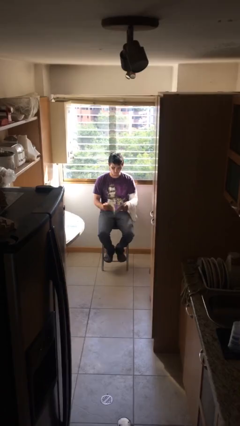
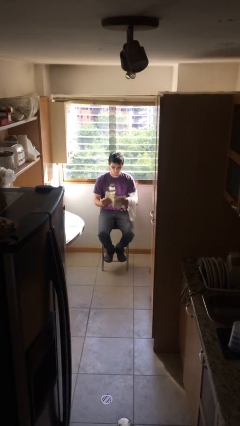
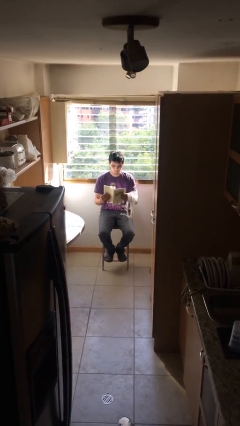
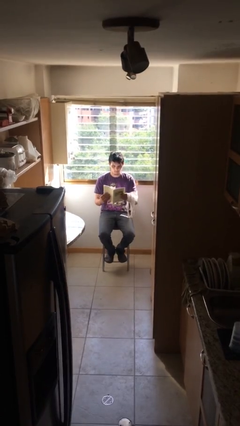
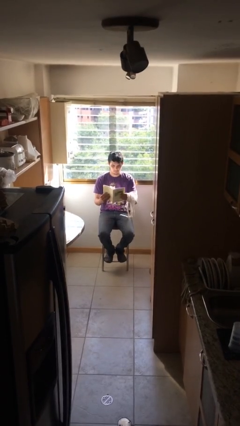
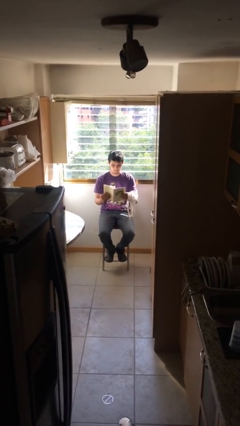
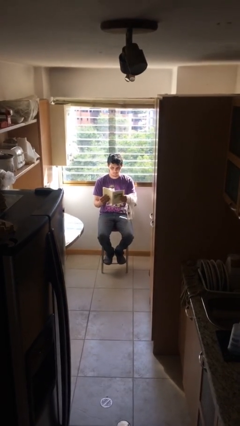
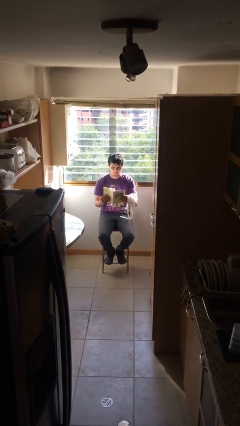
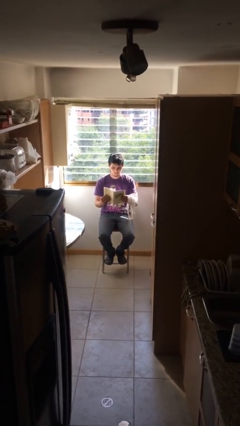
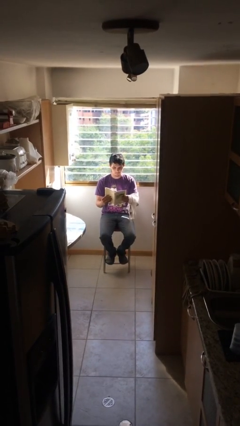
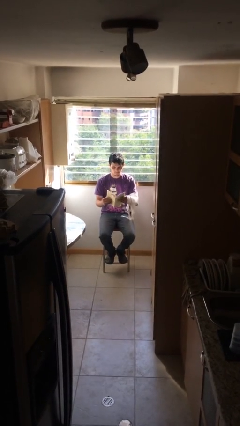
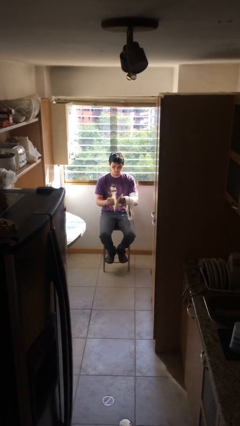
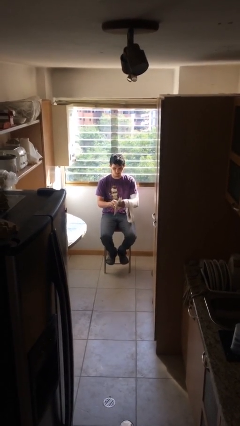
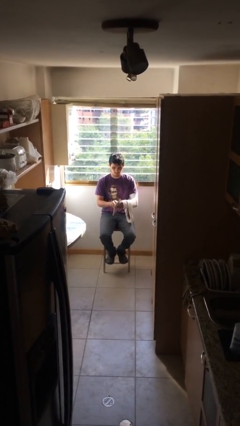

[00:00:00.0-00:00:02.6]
person reads document

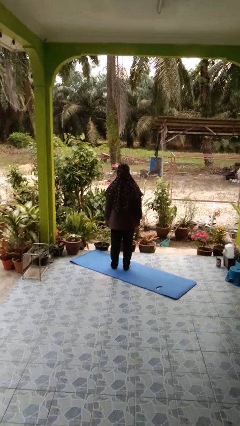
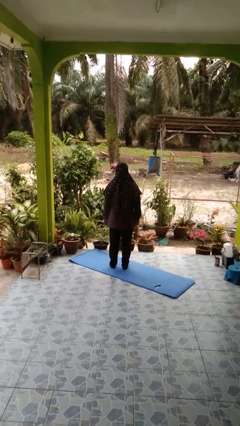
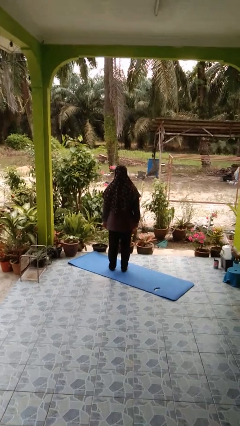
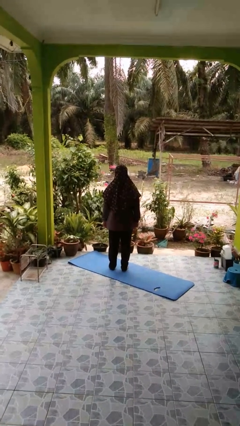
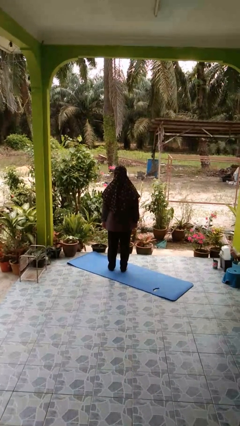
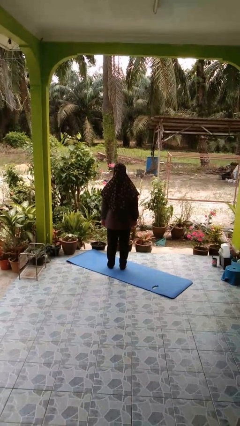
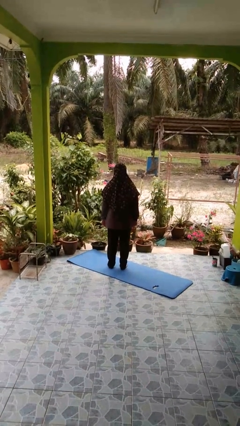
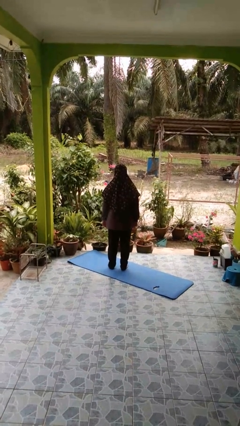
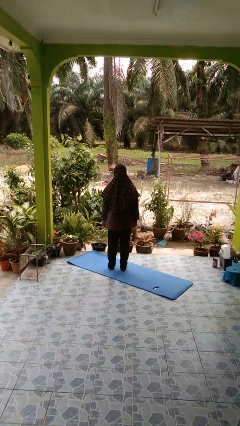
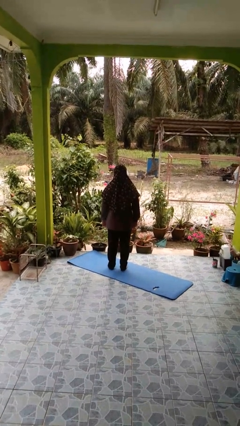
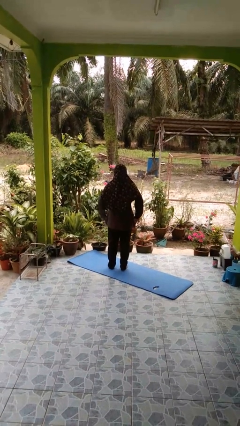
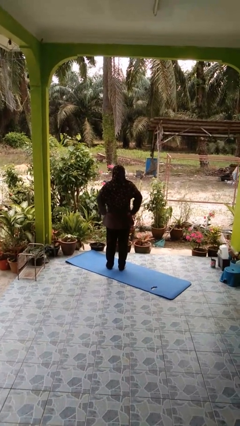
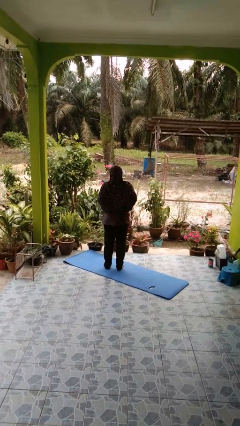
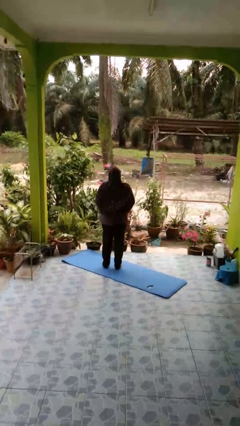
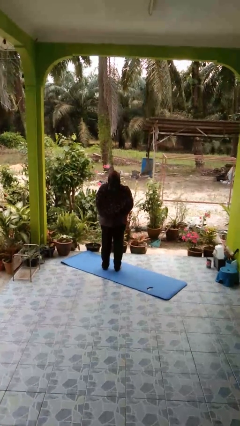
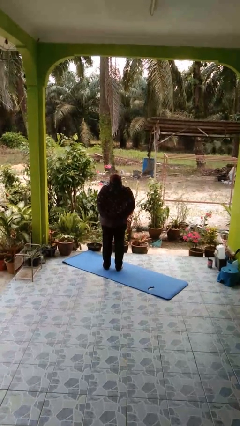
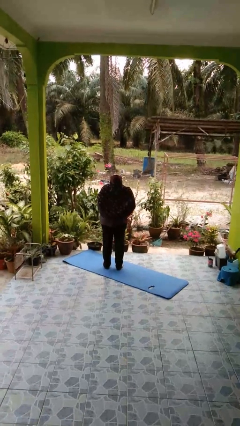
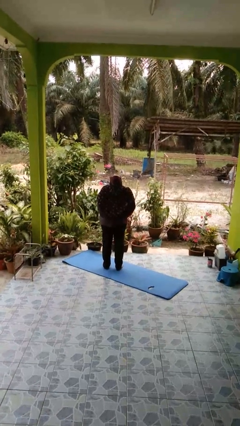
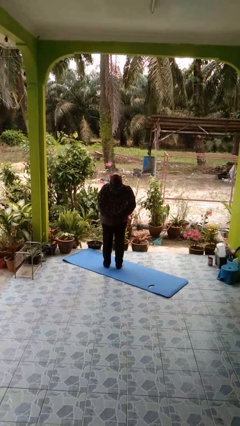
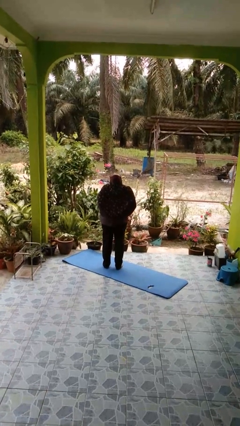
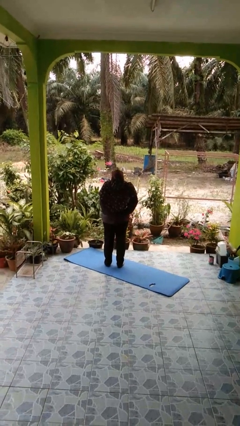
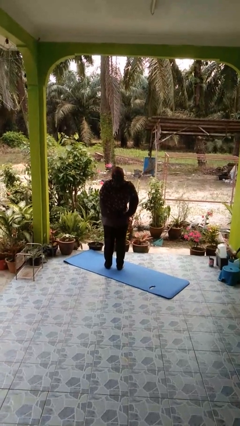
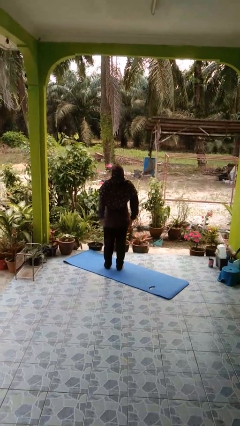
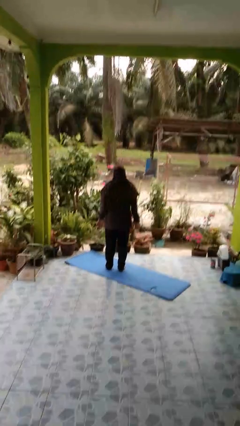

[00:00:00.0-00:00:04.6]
person stretches back

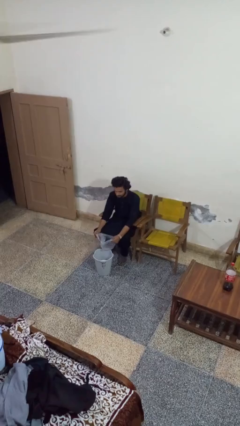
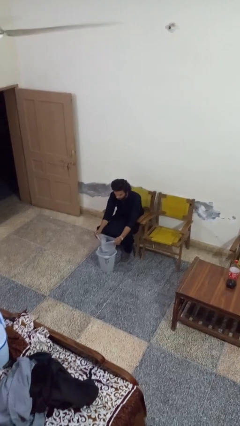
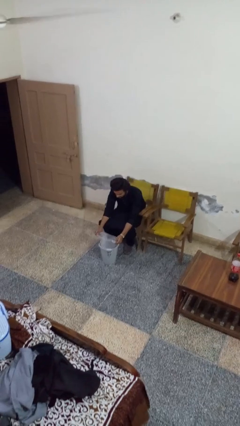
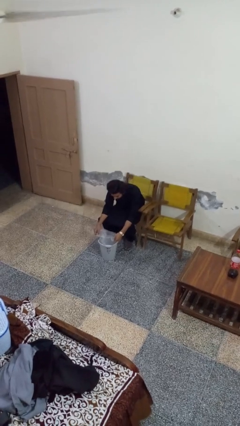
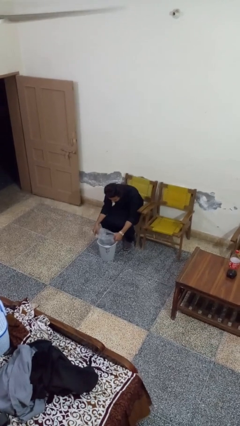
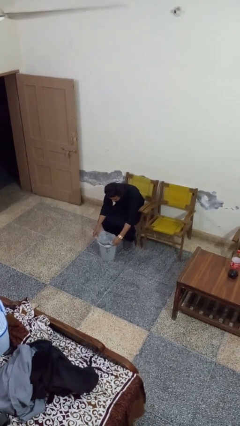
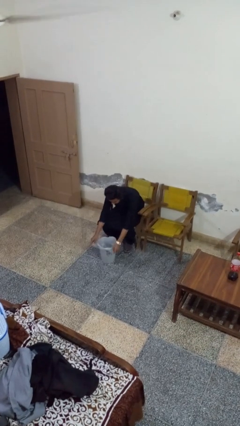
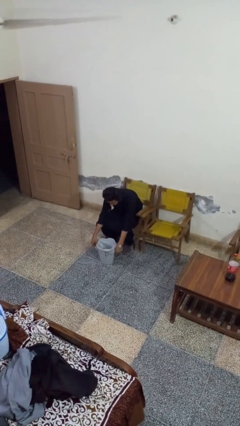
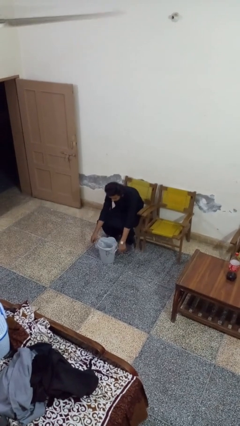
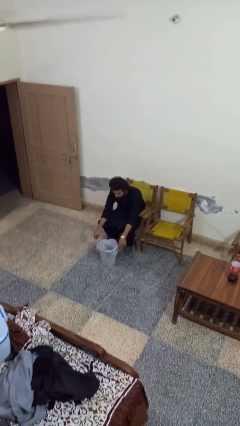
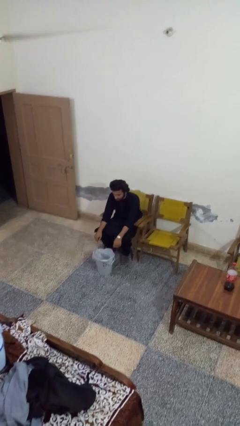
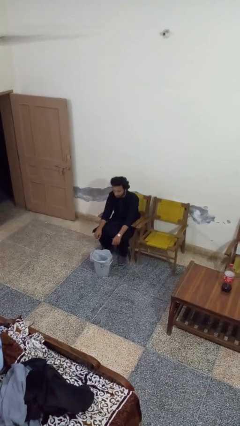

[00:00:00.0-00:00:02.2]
person inserts trashbag into trashcan

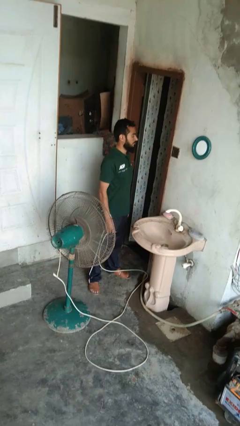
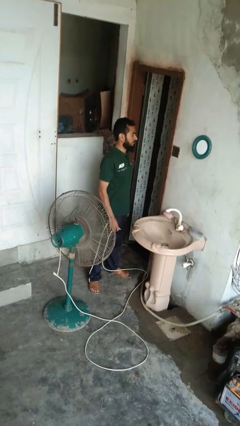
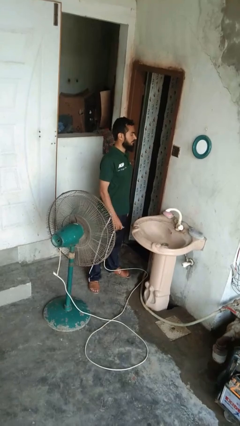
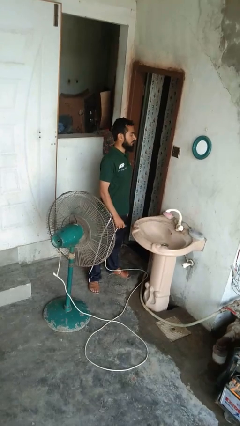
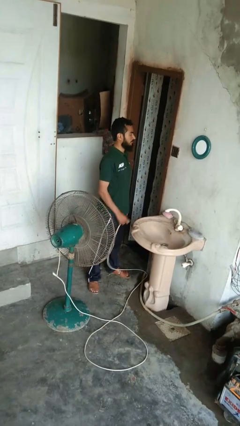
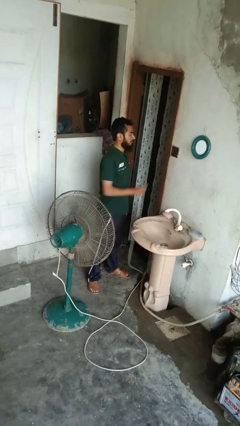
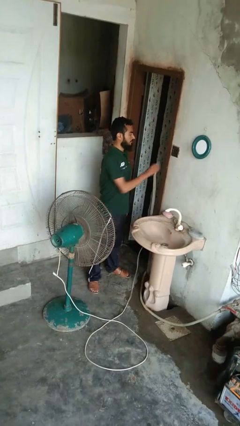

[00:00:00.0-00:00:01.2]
person turns on fan

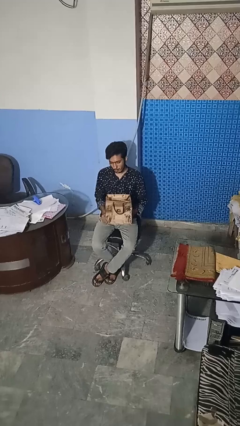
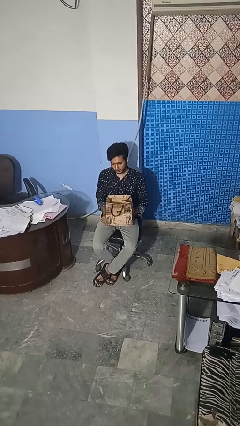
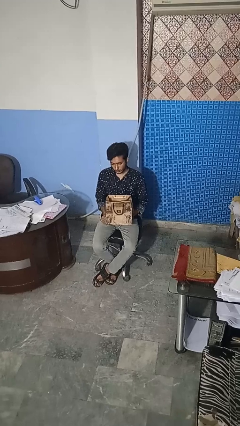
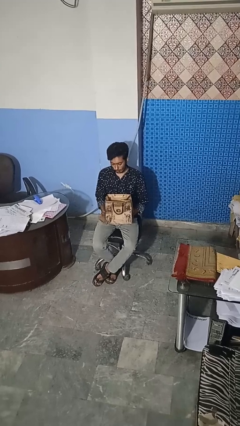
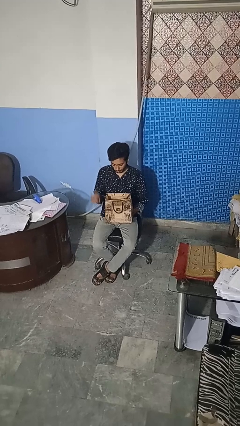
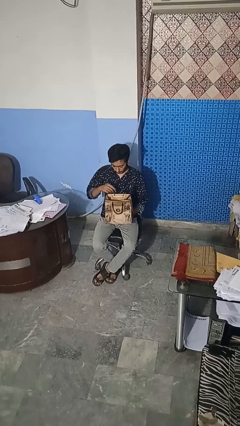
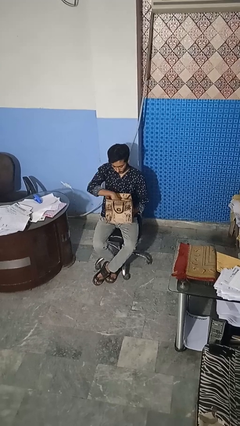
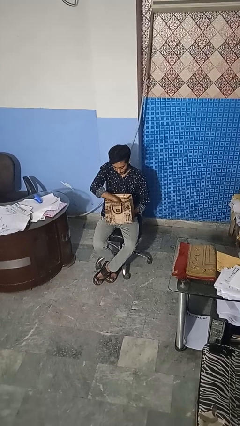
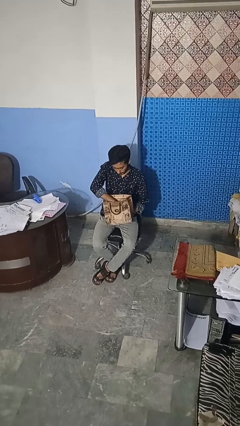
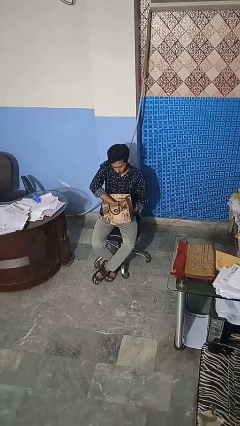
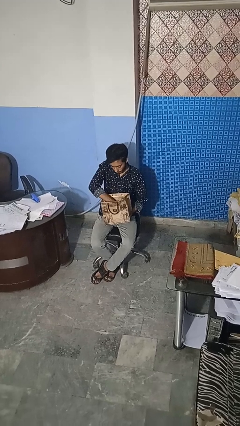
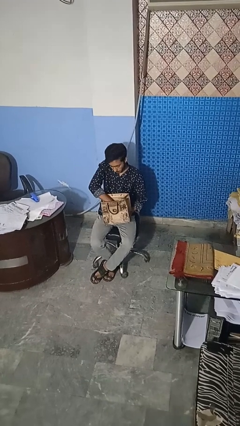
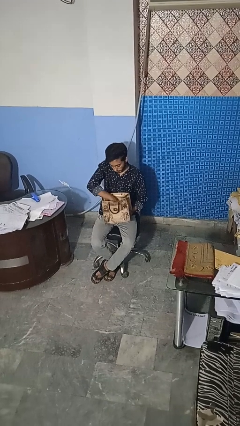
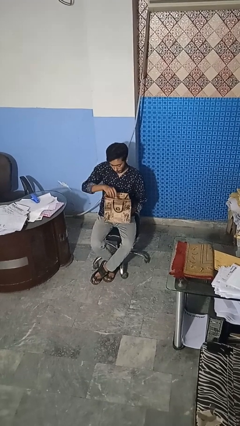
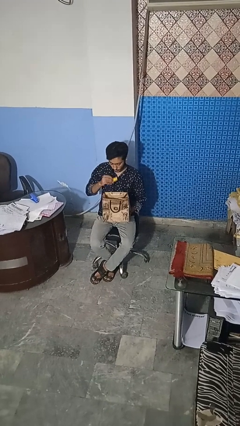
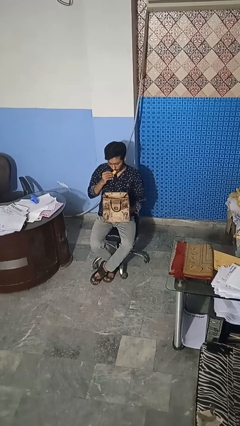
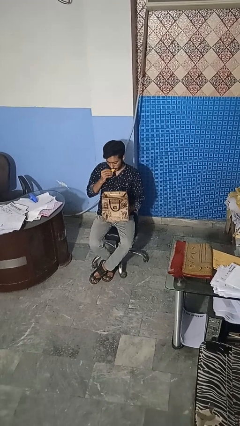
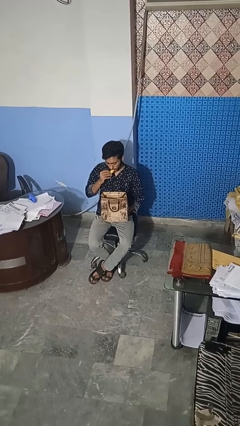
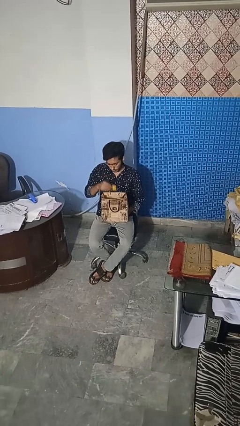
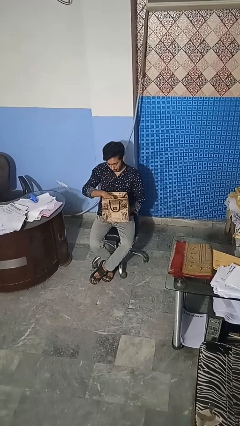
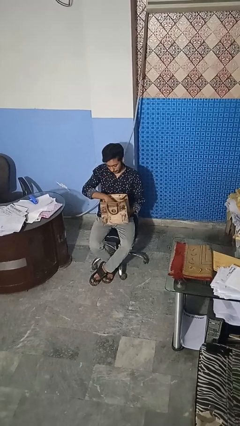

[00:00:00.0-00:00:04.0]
person eats snack from bag
